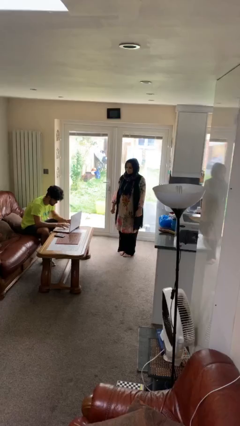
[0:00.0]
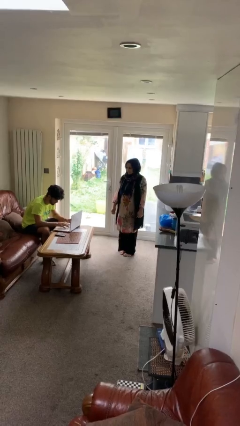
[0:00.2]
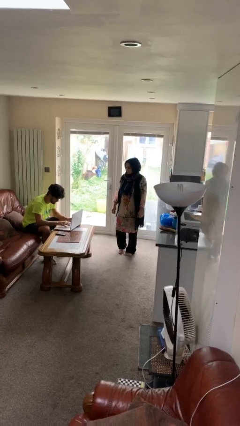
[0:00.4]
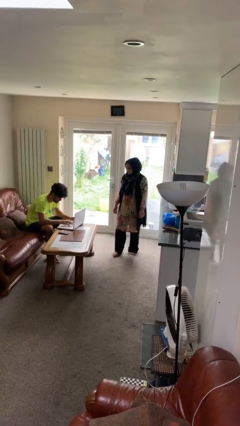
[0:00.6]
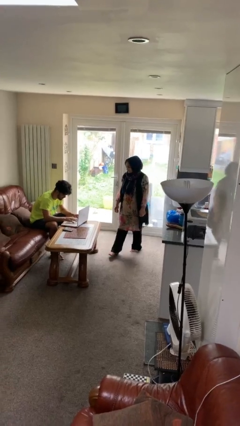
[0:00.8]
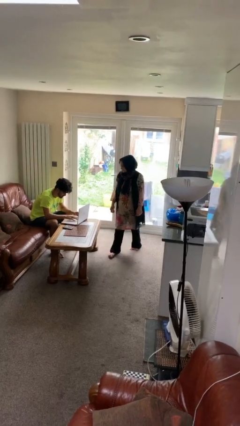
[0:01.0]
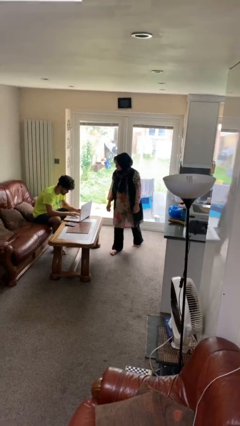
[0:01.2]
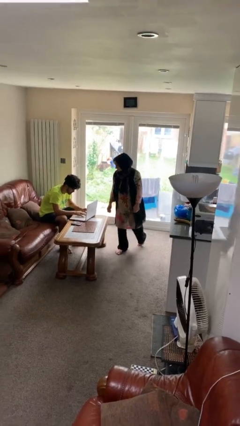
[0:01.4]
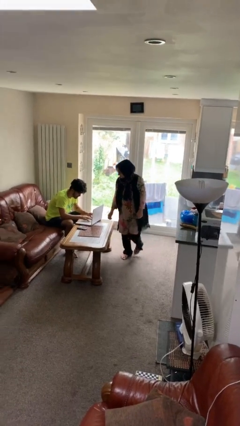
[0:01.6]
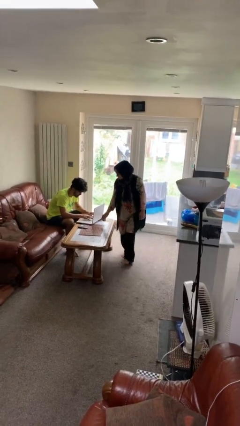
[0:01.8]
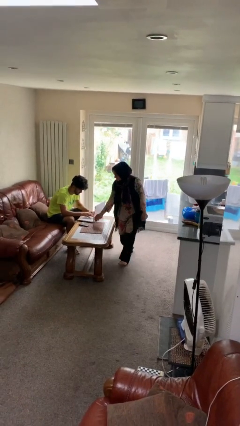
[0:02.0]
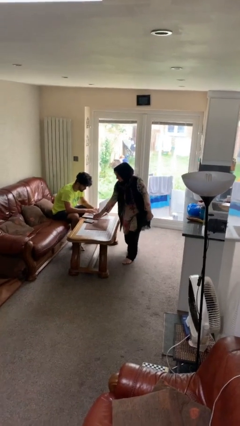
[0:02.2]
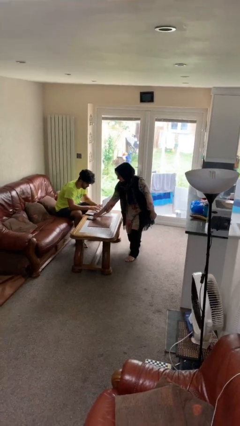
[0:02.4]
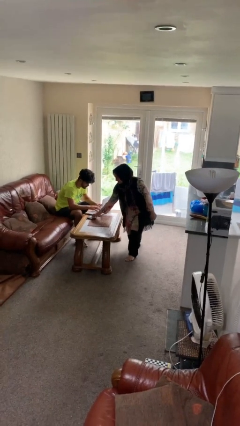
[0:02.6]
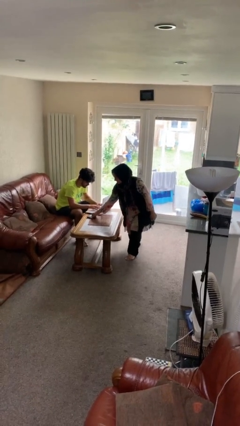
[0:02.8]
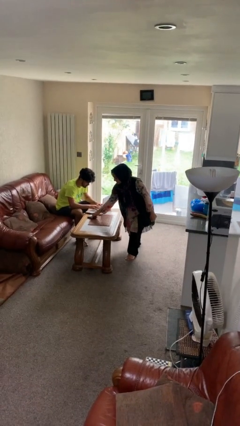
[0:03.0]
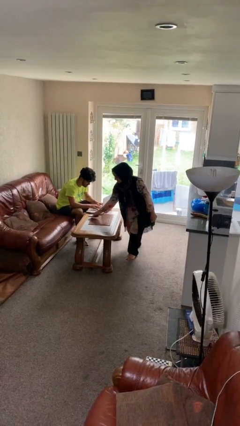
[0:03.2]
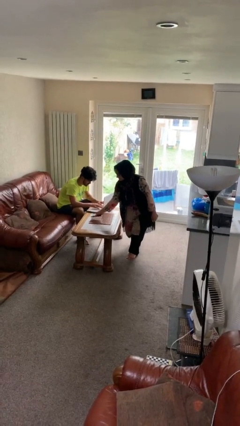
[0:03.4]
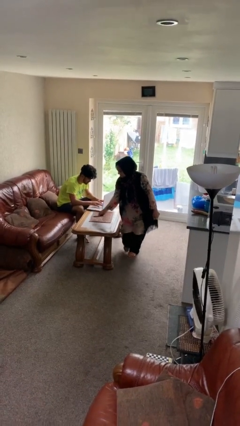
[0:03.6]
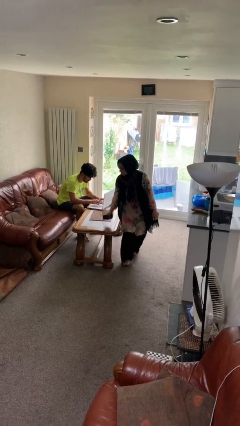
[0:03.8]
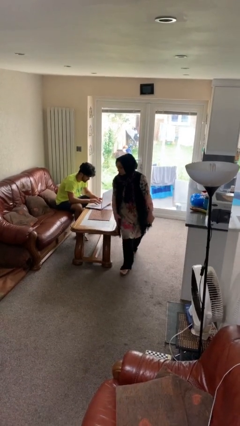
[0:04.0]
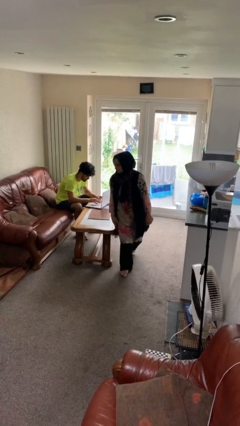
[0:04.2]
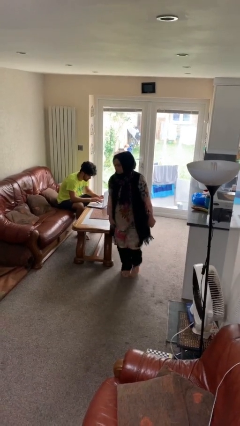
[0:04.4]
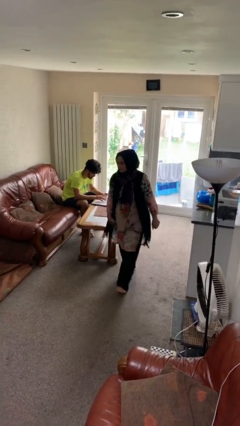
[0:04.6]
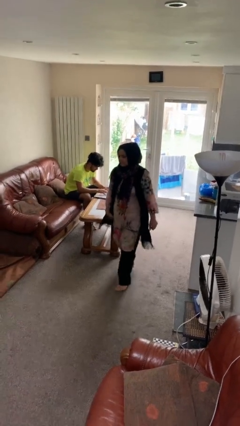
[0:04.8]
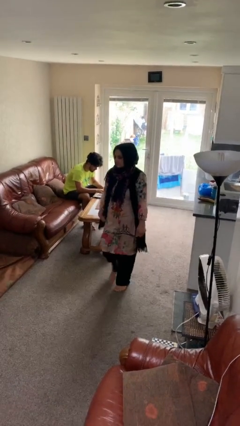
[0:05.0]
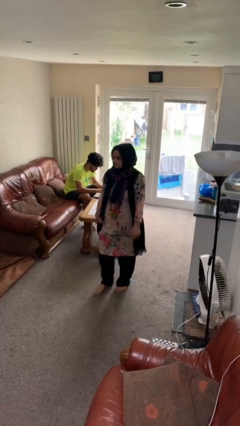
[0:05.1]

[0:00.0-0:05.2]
person steals object from person

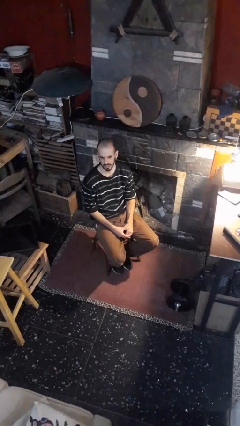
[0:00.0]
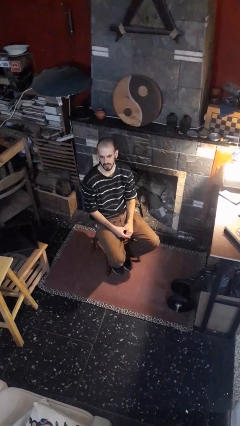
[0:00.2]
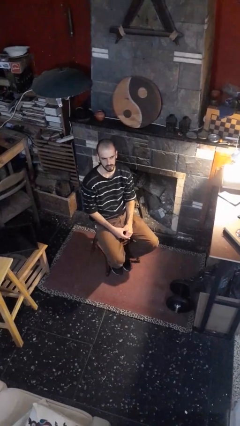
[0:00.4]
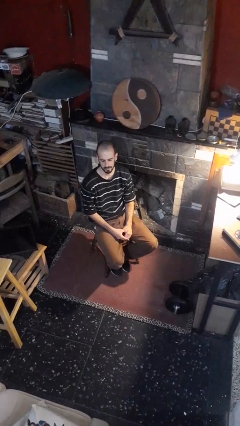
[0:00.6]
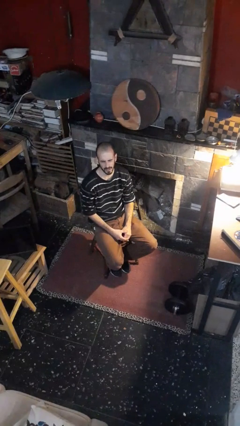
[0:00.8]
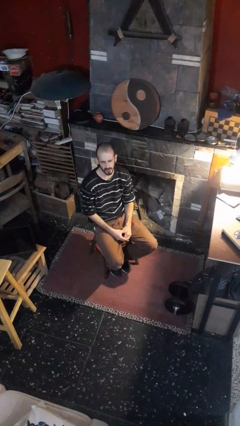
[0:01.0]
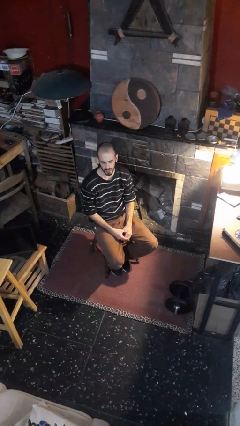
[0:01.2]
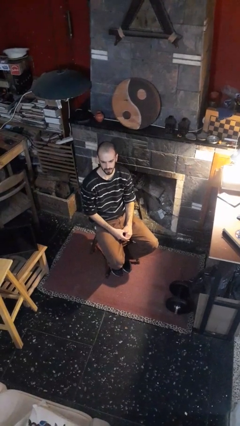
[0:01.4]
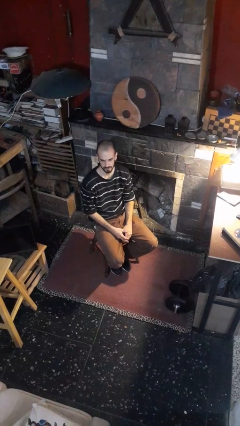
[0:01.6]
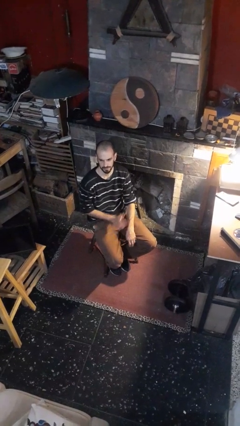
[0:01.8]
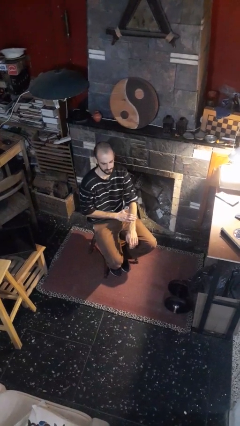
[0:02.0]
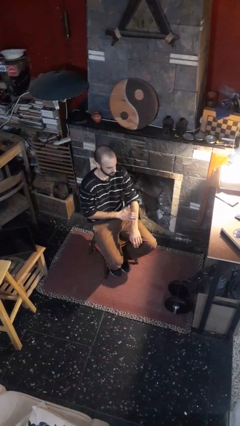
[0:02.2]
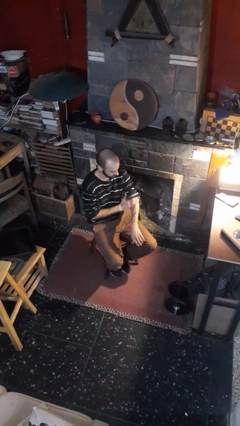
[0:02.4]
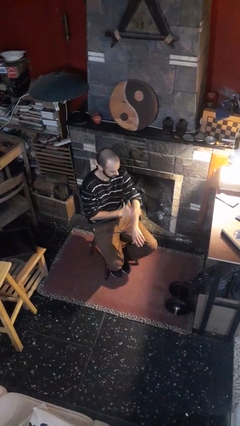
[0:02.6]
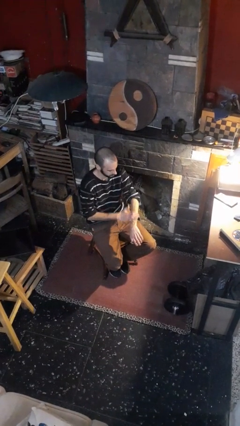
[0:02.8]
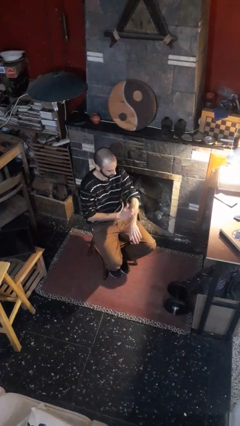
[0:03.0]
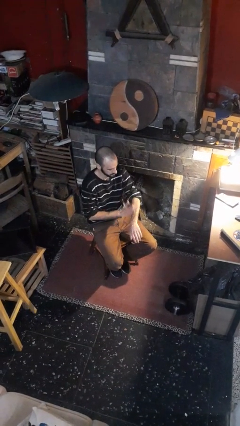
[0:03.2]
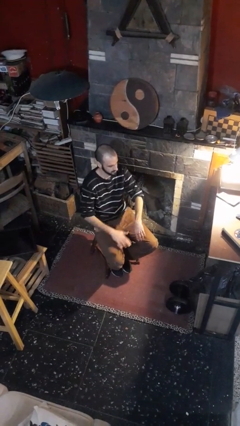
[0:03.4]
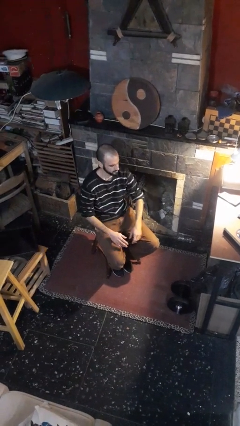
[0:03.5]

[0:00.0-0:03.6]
person swats bug

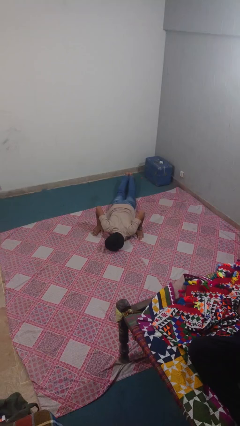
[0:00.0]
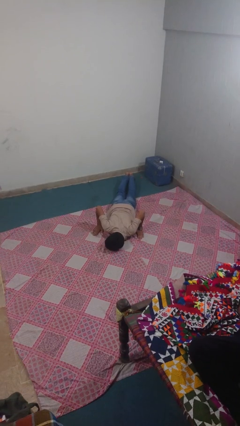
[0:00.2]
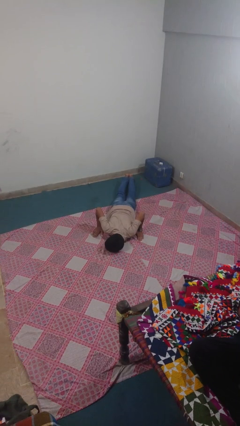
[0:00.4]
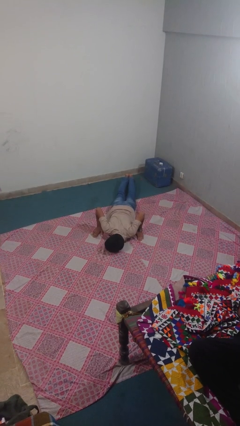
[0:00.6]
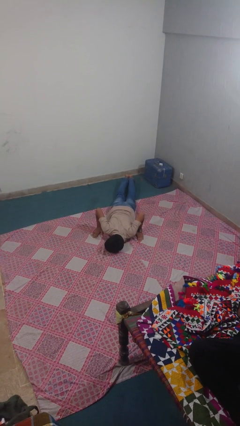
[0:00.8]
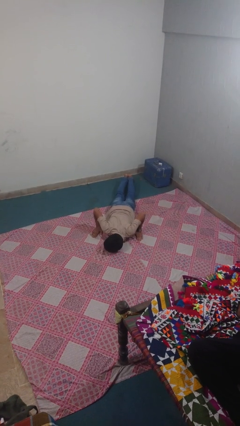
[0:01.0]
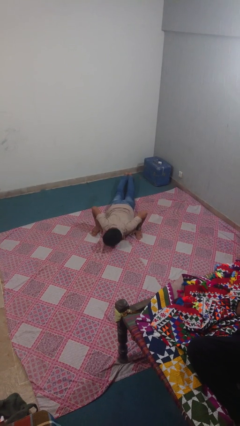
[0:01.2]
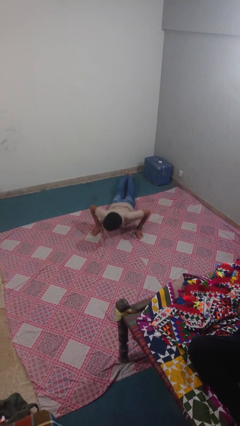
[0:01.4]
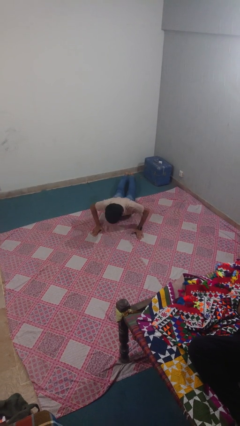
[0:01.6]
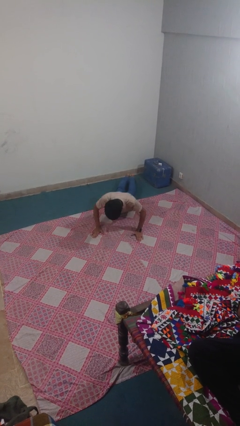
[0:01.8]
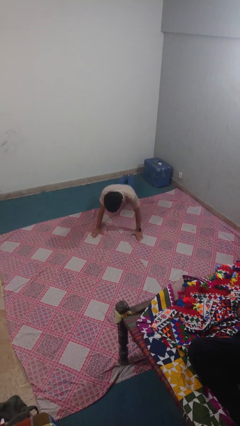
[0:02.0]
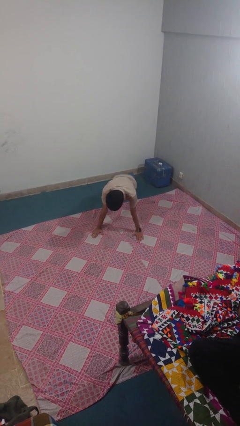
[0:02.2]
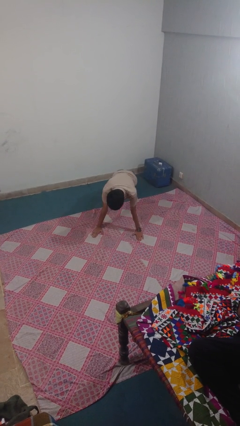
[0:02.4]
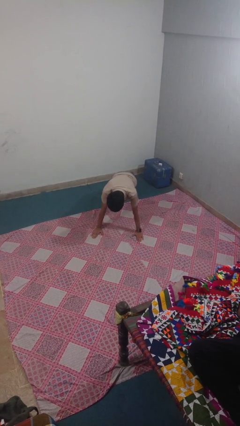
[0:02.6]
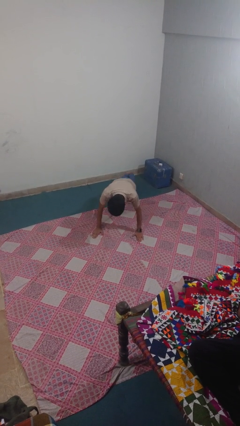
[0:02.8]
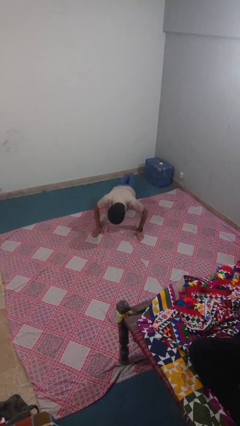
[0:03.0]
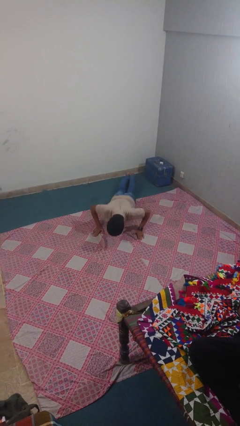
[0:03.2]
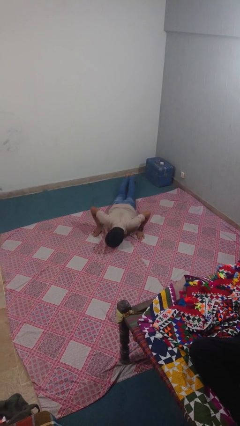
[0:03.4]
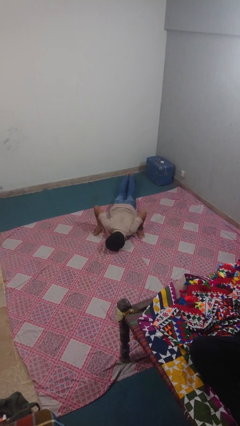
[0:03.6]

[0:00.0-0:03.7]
person exercises with pushup

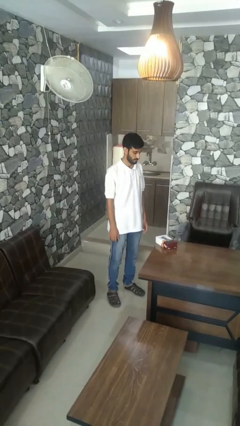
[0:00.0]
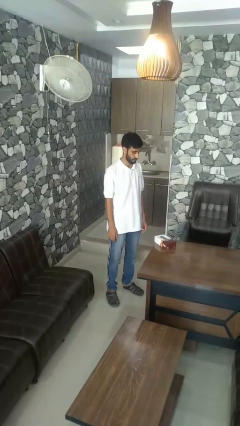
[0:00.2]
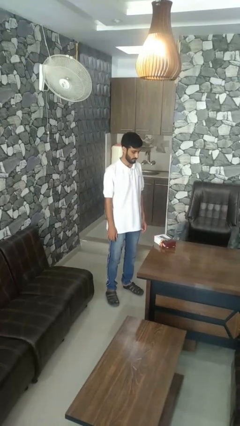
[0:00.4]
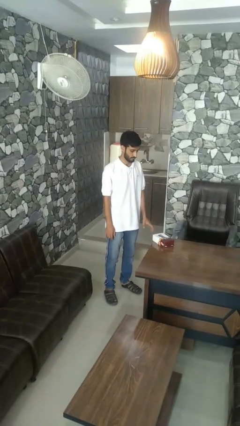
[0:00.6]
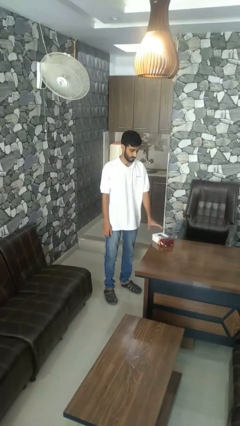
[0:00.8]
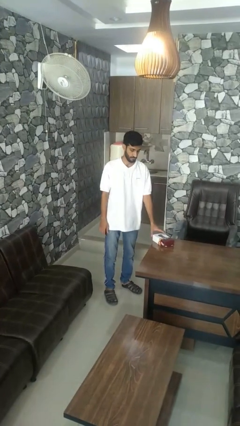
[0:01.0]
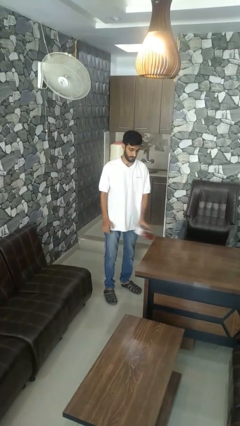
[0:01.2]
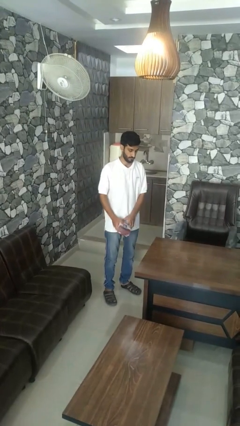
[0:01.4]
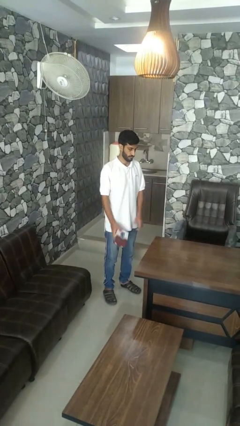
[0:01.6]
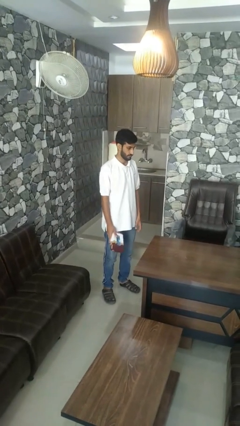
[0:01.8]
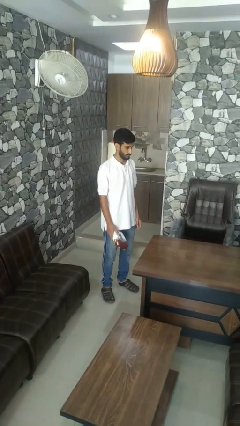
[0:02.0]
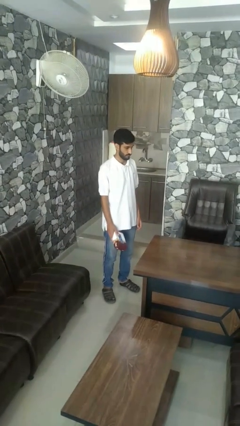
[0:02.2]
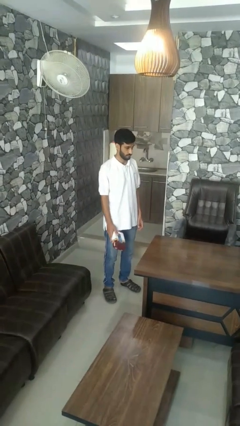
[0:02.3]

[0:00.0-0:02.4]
person picks up object from table

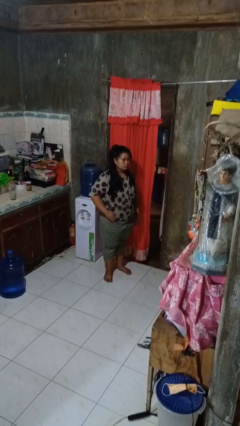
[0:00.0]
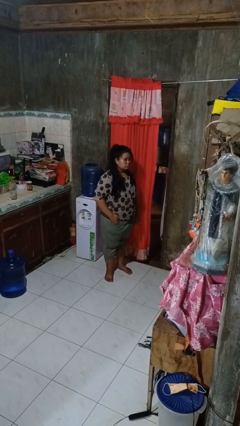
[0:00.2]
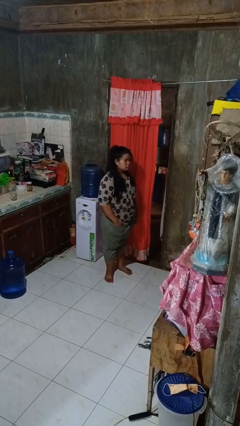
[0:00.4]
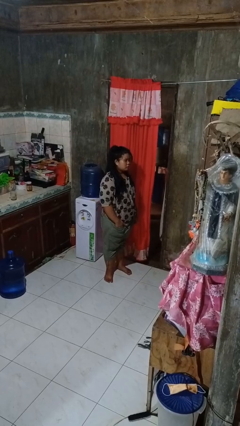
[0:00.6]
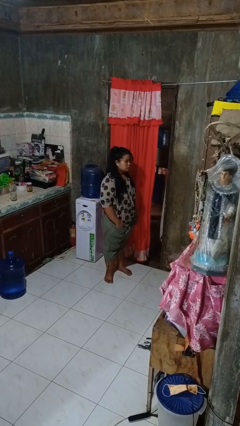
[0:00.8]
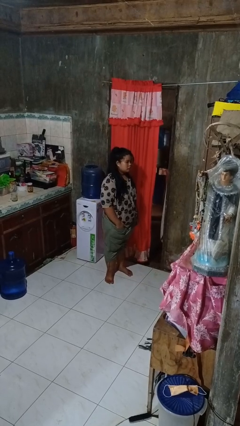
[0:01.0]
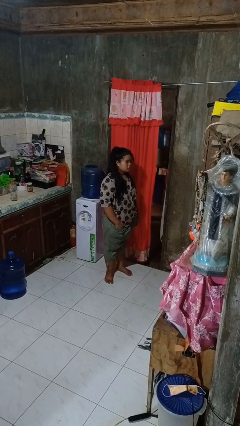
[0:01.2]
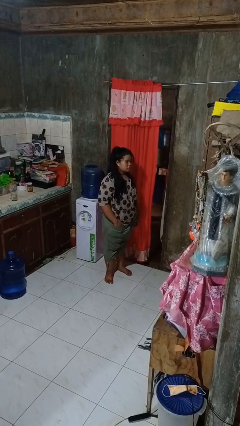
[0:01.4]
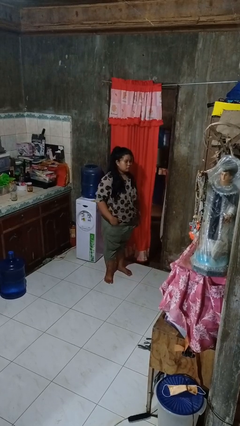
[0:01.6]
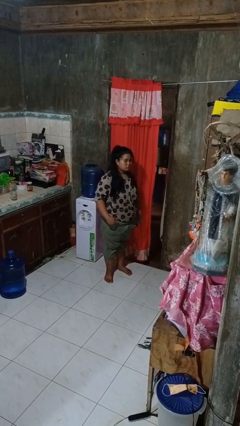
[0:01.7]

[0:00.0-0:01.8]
person puts hands in back pockets

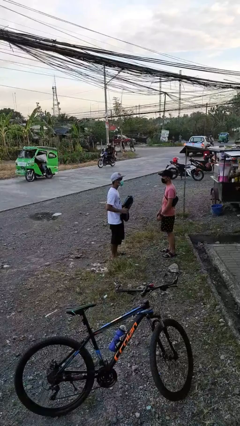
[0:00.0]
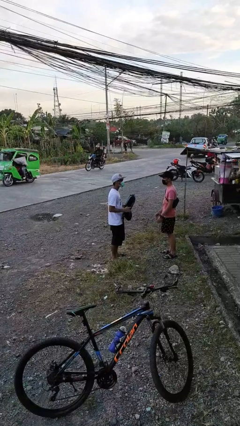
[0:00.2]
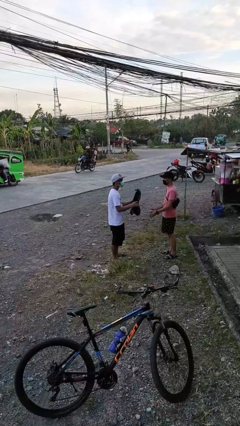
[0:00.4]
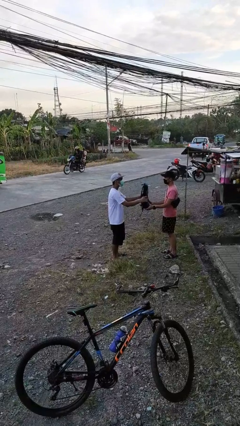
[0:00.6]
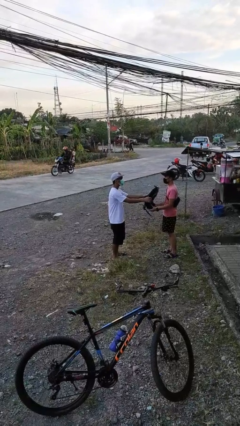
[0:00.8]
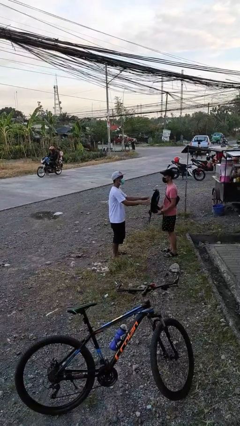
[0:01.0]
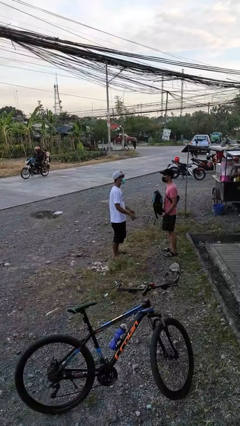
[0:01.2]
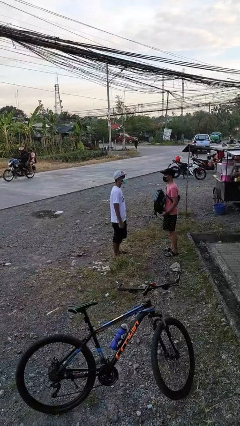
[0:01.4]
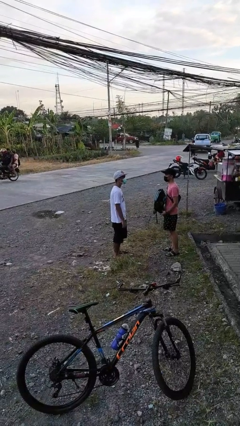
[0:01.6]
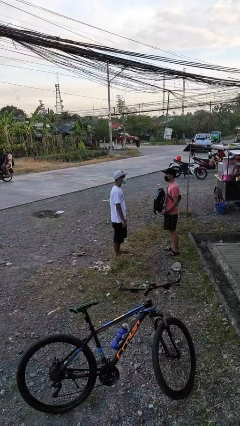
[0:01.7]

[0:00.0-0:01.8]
person transfers object to person
